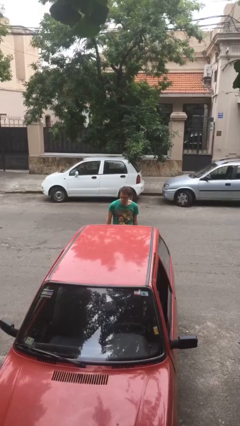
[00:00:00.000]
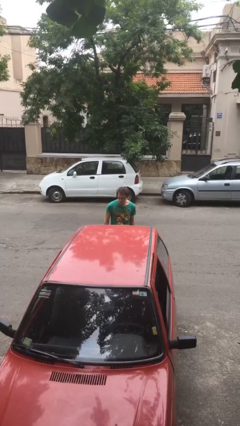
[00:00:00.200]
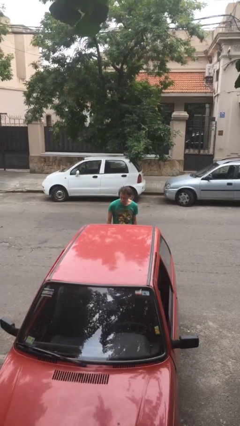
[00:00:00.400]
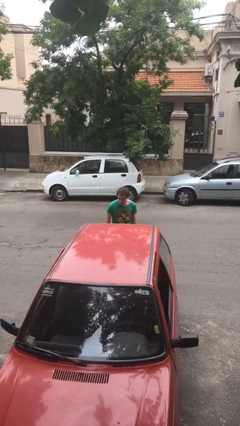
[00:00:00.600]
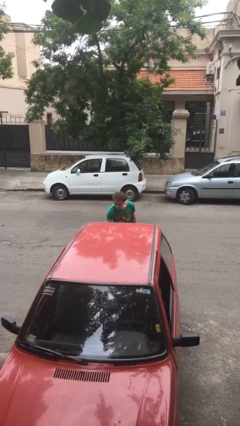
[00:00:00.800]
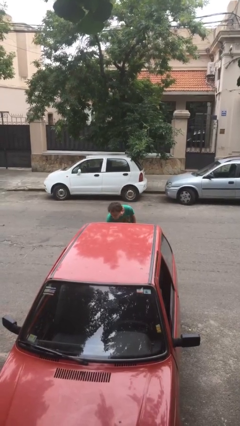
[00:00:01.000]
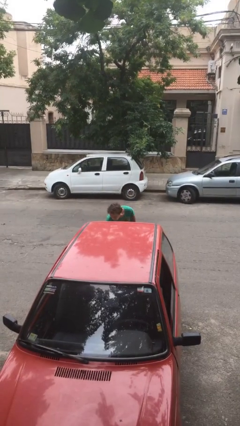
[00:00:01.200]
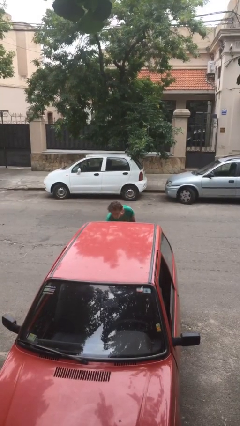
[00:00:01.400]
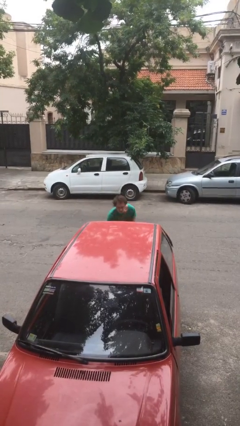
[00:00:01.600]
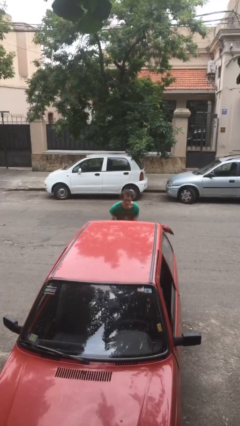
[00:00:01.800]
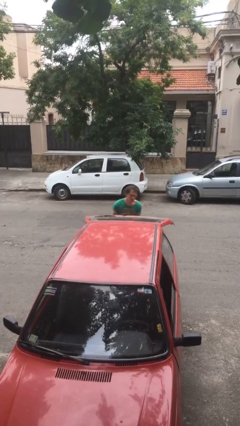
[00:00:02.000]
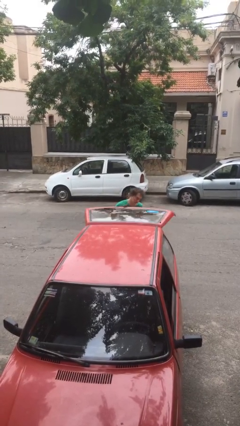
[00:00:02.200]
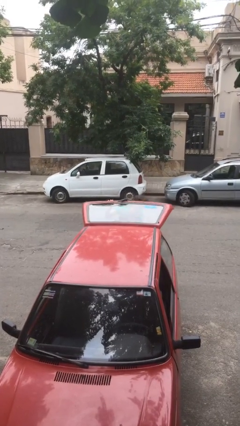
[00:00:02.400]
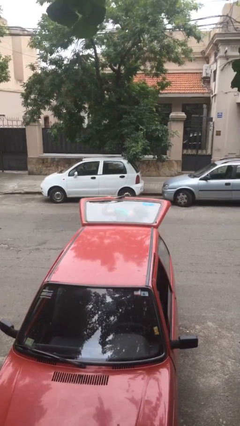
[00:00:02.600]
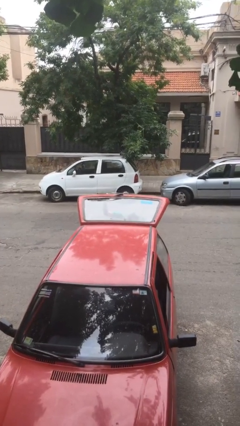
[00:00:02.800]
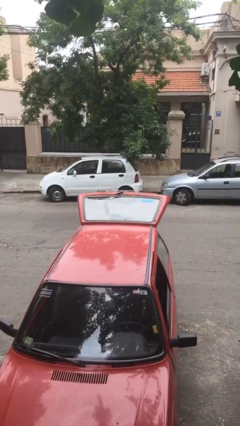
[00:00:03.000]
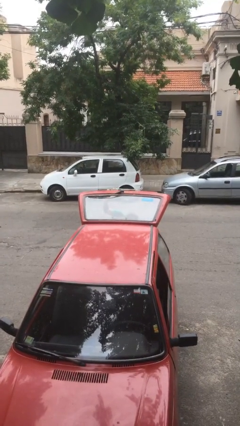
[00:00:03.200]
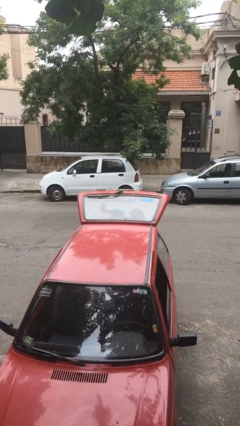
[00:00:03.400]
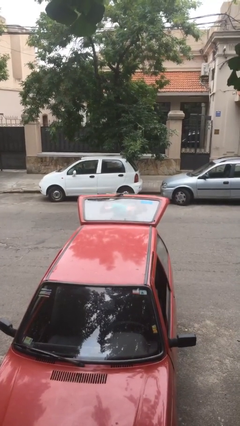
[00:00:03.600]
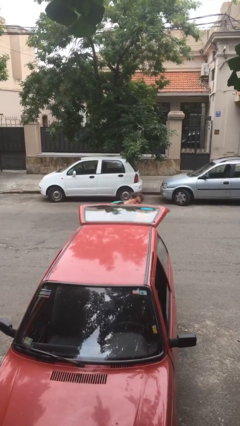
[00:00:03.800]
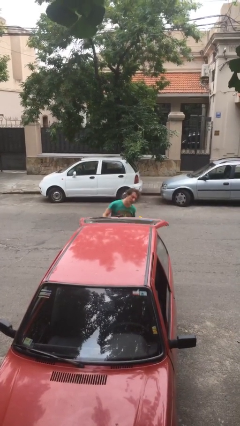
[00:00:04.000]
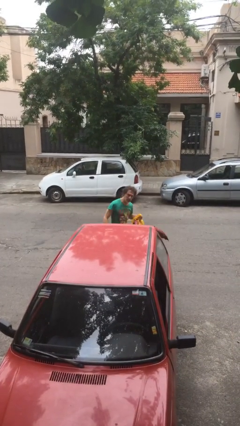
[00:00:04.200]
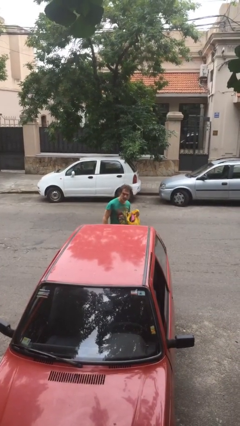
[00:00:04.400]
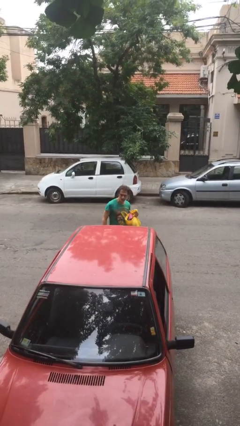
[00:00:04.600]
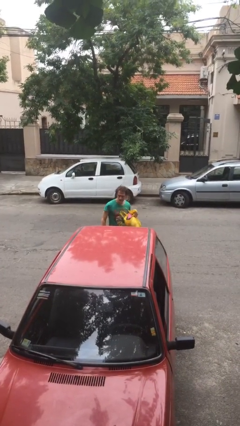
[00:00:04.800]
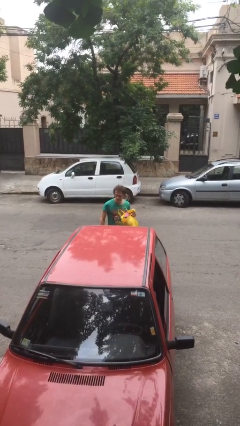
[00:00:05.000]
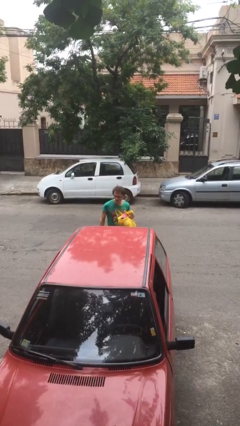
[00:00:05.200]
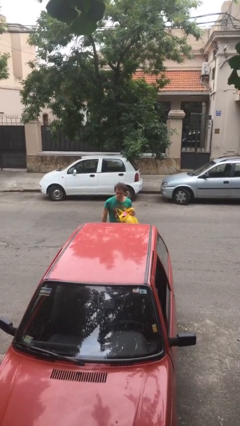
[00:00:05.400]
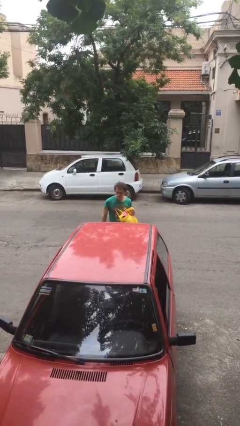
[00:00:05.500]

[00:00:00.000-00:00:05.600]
person unloads car

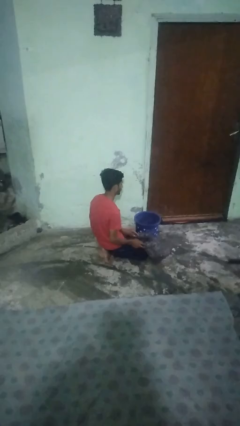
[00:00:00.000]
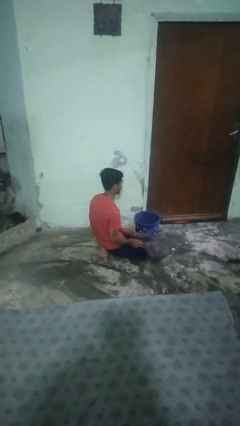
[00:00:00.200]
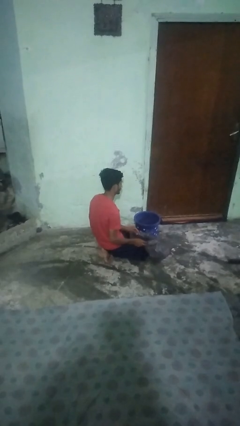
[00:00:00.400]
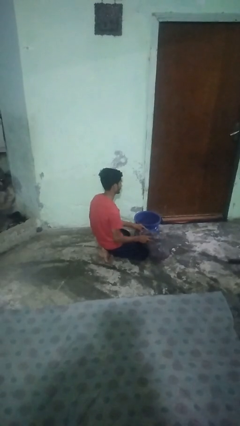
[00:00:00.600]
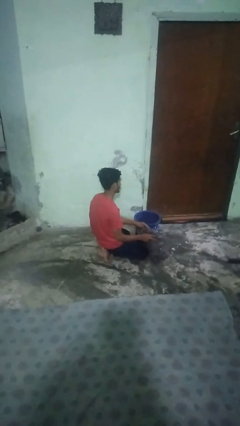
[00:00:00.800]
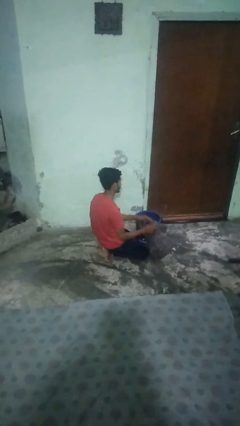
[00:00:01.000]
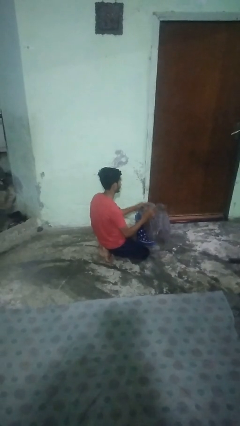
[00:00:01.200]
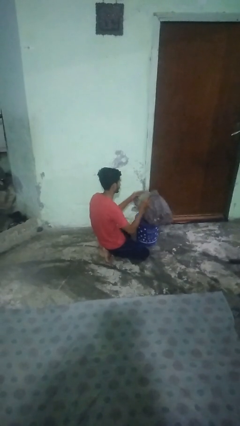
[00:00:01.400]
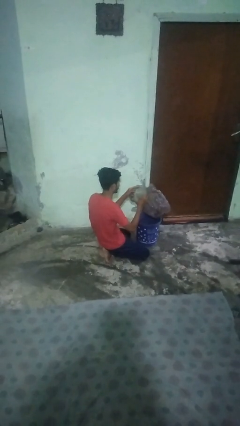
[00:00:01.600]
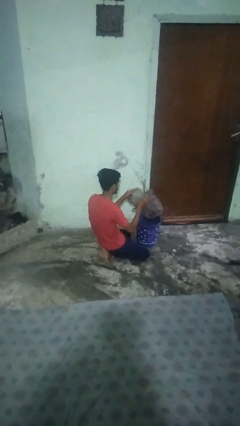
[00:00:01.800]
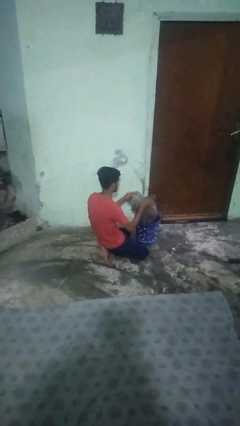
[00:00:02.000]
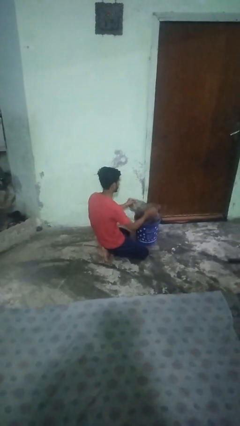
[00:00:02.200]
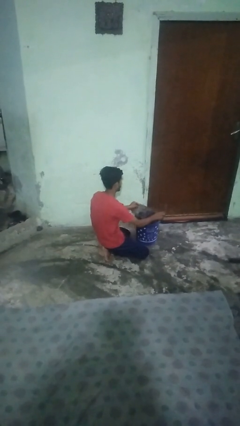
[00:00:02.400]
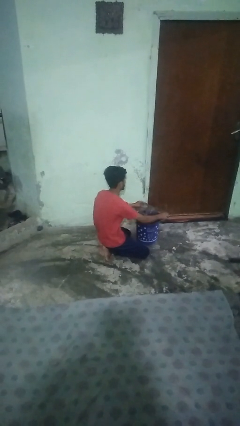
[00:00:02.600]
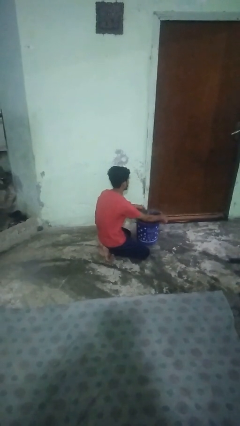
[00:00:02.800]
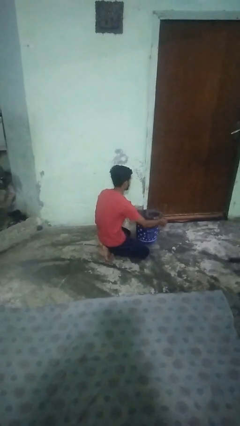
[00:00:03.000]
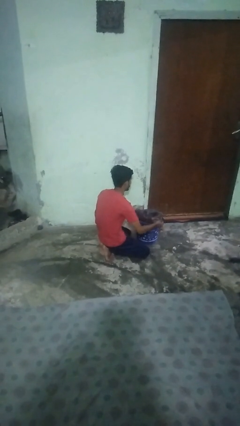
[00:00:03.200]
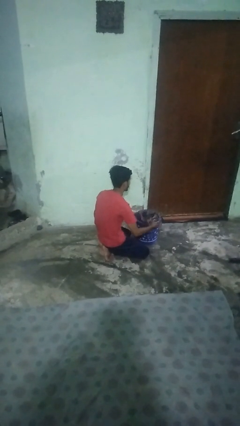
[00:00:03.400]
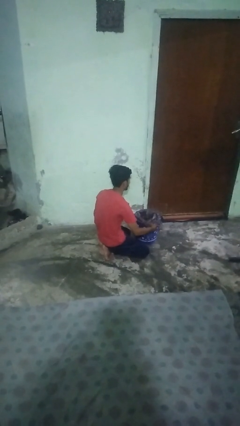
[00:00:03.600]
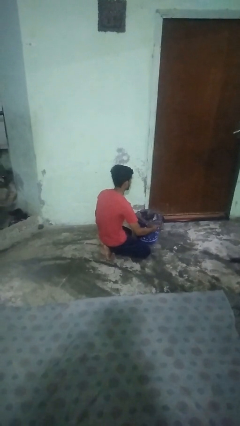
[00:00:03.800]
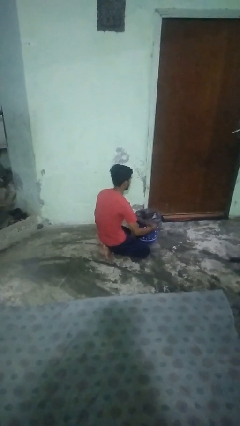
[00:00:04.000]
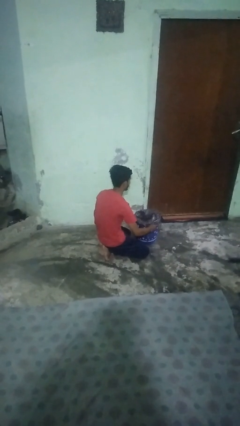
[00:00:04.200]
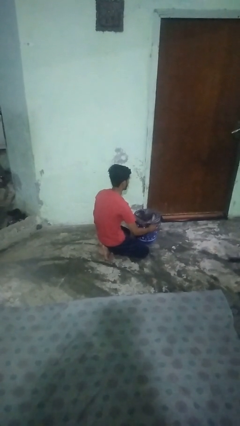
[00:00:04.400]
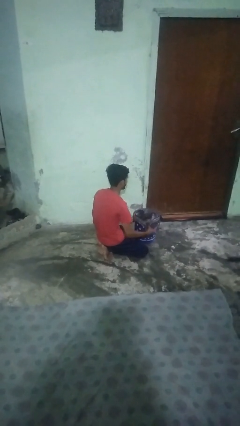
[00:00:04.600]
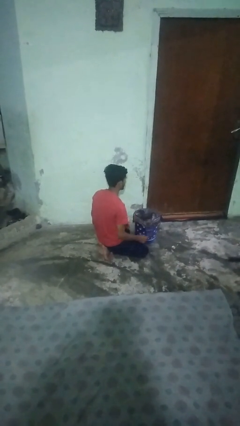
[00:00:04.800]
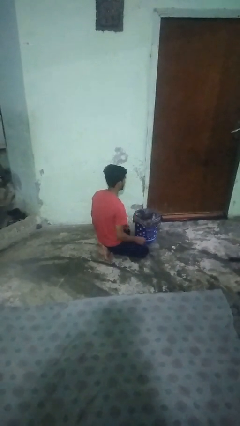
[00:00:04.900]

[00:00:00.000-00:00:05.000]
person inserts trashbag into trashcan

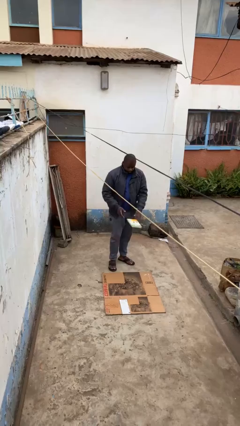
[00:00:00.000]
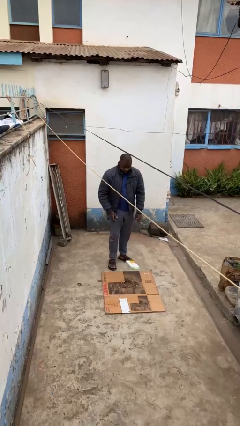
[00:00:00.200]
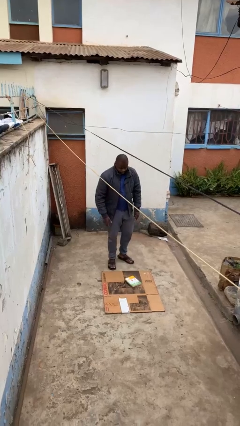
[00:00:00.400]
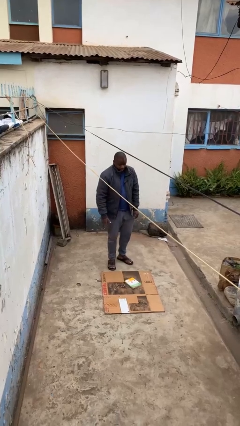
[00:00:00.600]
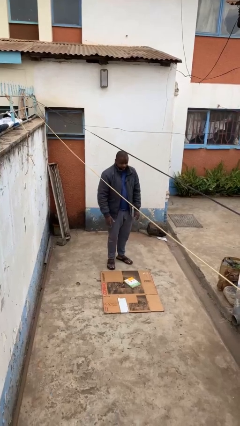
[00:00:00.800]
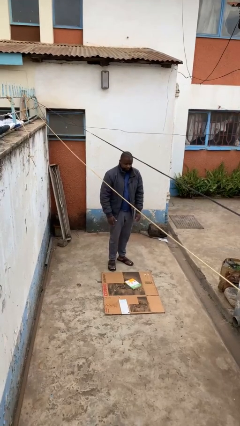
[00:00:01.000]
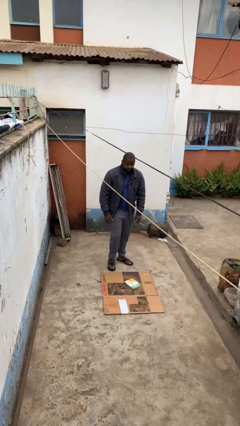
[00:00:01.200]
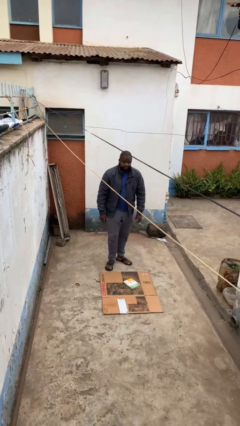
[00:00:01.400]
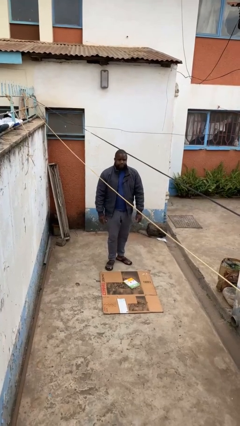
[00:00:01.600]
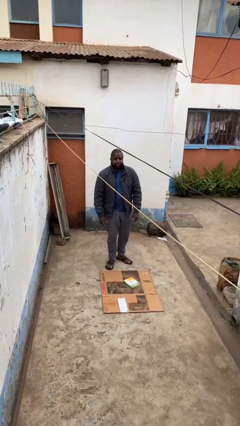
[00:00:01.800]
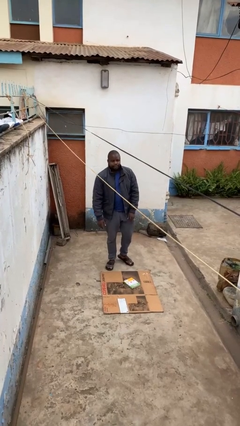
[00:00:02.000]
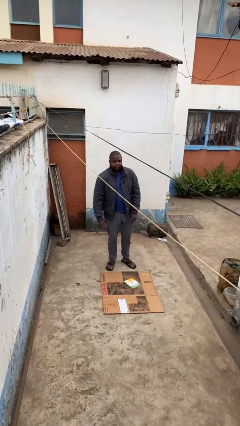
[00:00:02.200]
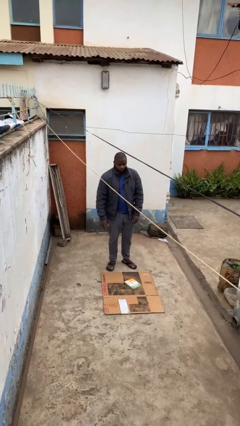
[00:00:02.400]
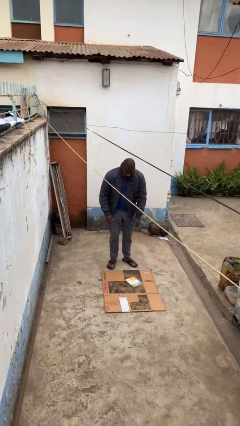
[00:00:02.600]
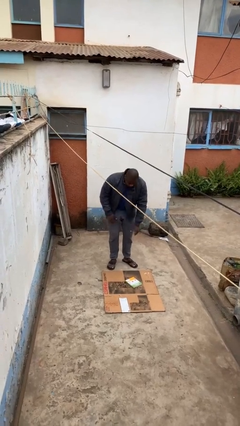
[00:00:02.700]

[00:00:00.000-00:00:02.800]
person drops object

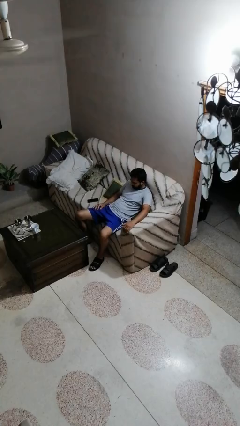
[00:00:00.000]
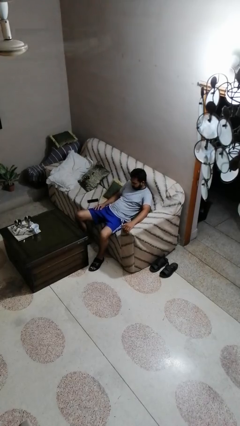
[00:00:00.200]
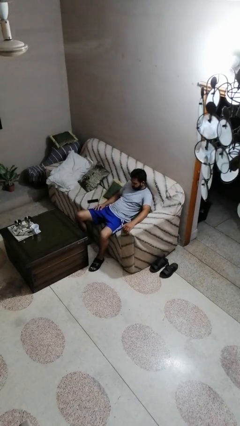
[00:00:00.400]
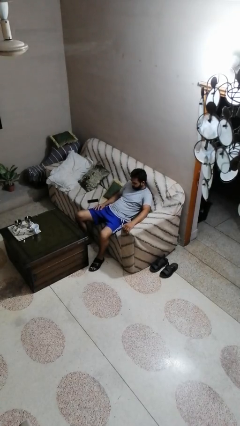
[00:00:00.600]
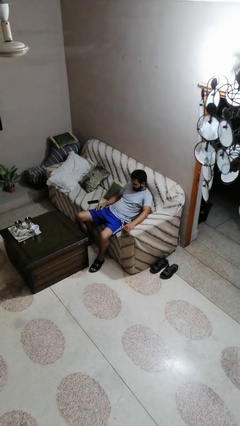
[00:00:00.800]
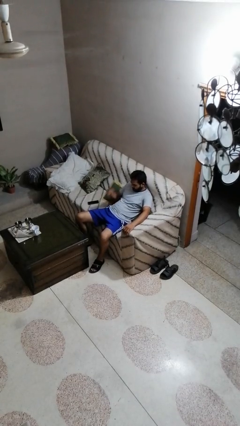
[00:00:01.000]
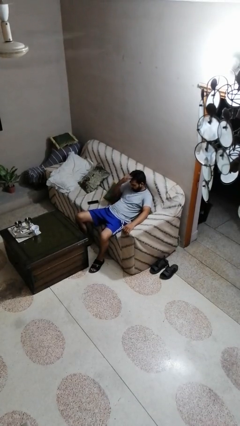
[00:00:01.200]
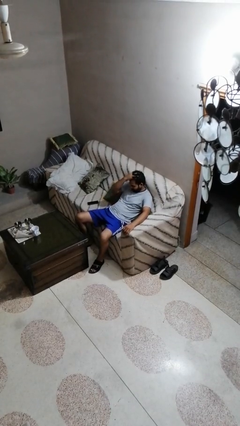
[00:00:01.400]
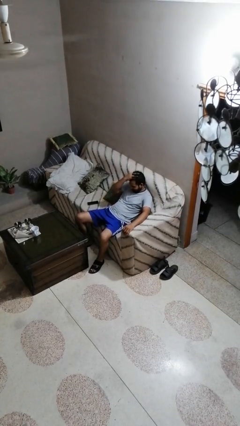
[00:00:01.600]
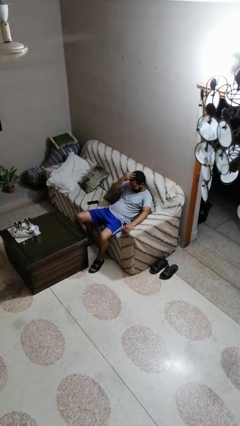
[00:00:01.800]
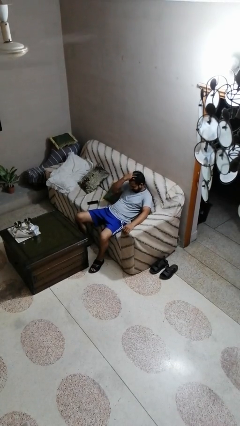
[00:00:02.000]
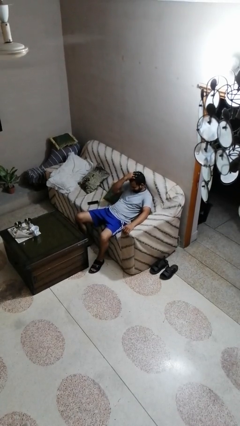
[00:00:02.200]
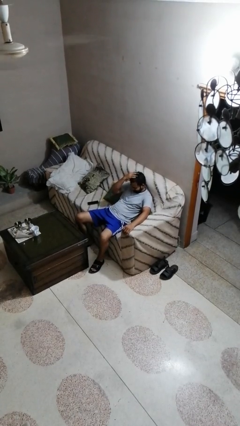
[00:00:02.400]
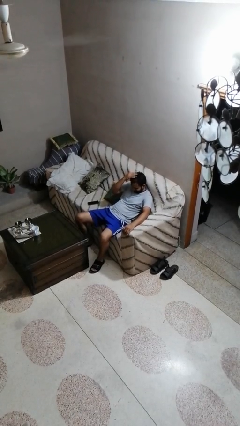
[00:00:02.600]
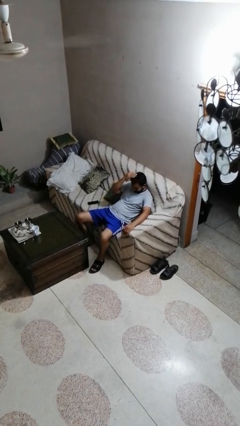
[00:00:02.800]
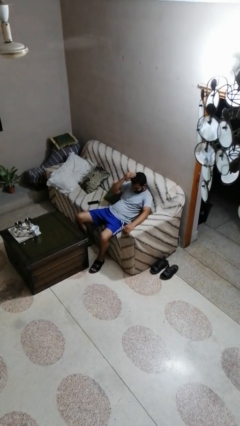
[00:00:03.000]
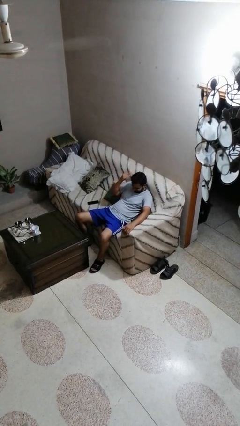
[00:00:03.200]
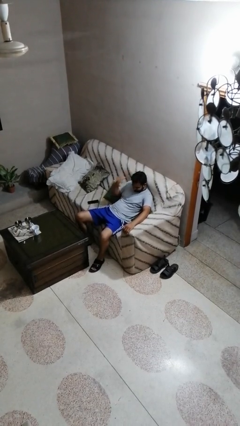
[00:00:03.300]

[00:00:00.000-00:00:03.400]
person strokes hair

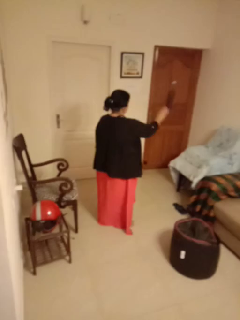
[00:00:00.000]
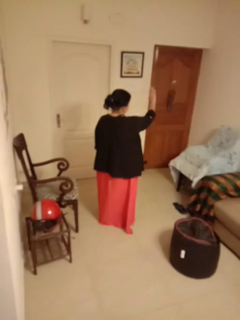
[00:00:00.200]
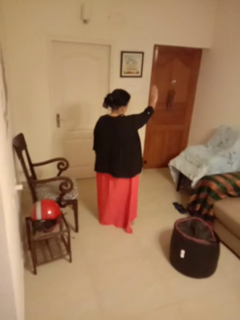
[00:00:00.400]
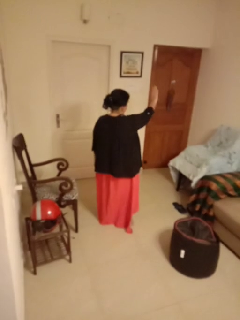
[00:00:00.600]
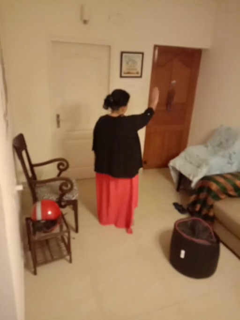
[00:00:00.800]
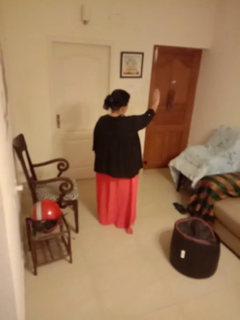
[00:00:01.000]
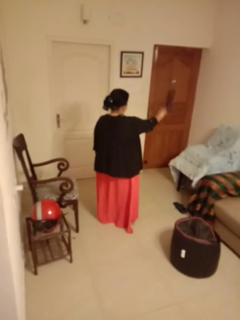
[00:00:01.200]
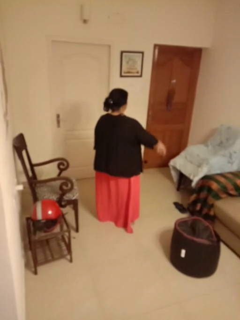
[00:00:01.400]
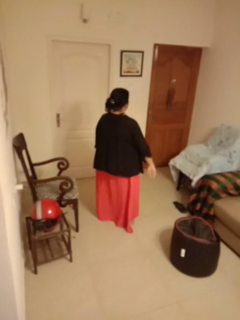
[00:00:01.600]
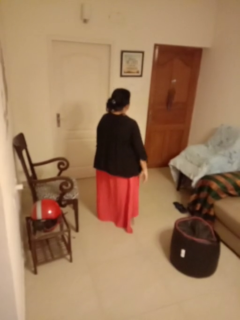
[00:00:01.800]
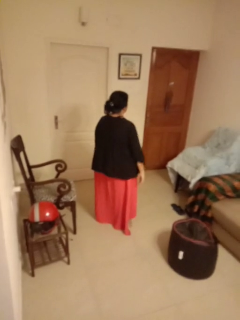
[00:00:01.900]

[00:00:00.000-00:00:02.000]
person gestures stop
